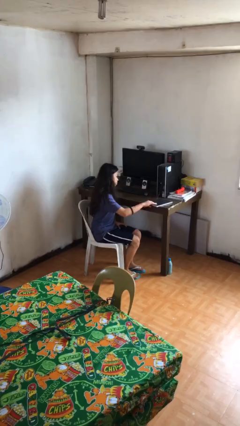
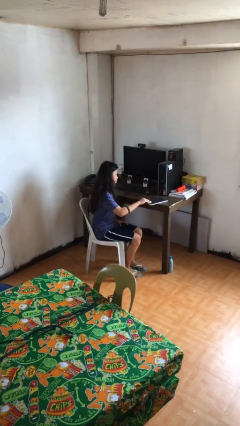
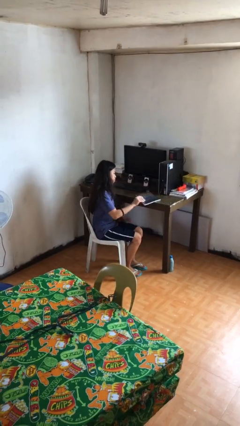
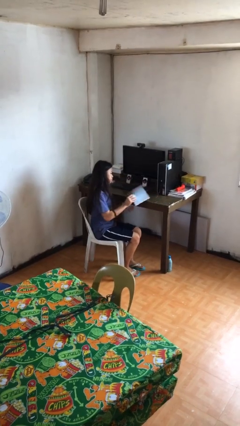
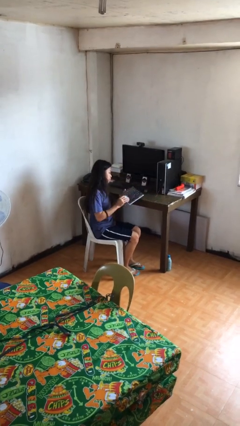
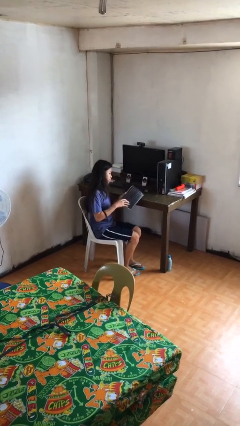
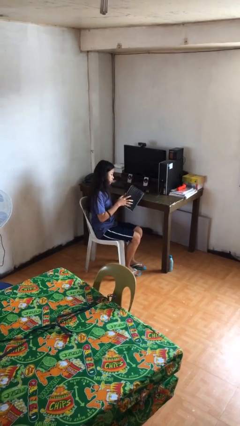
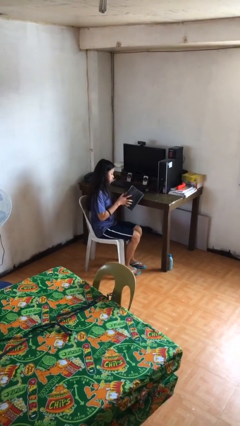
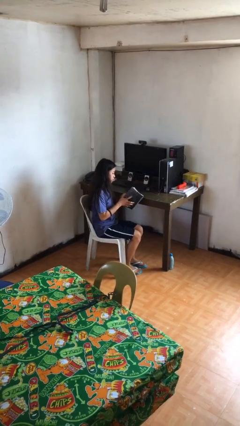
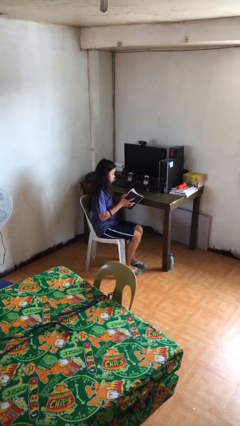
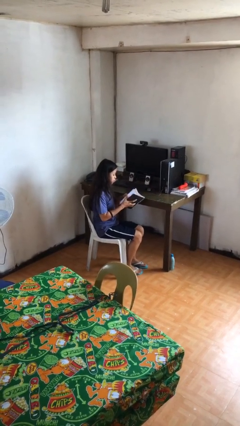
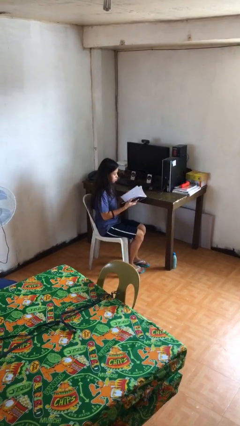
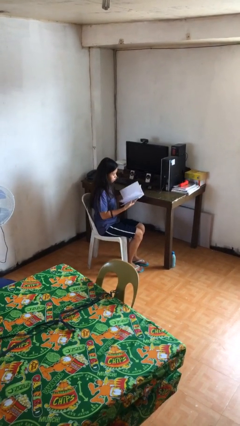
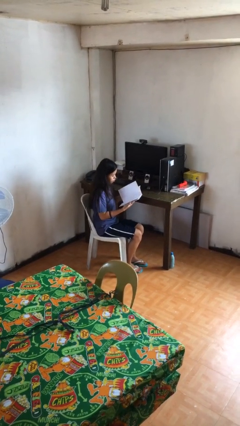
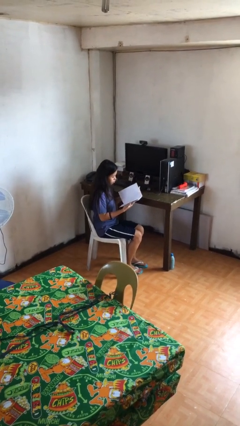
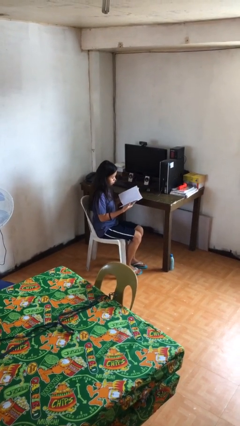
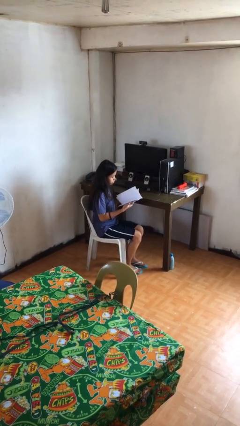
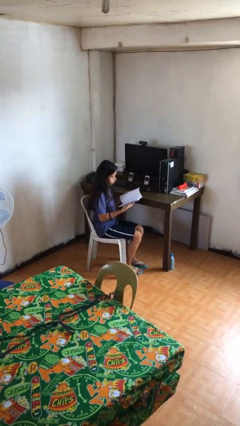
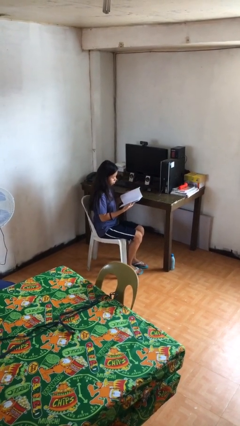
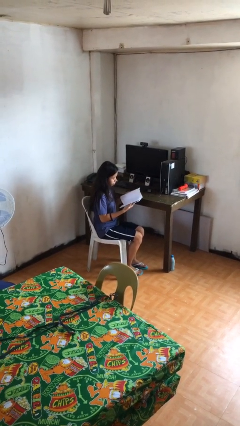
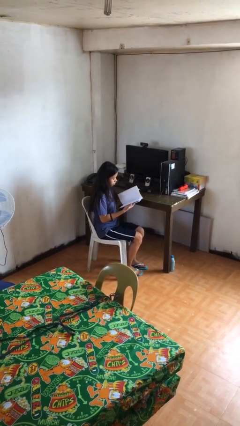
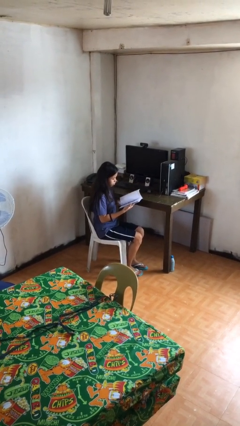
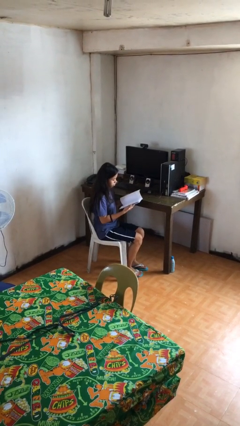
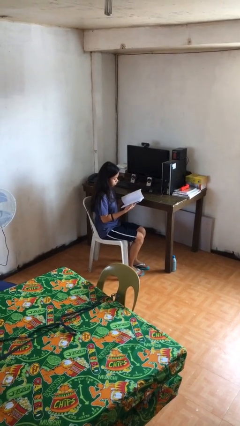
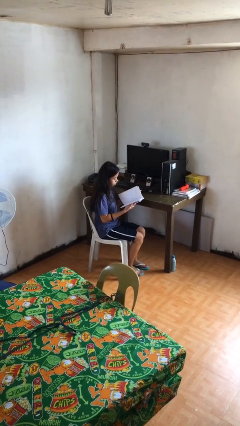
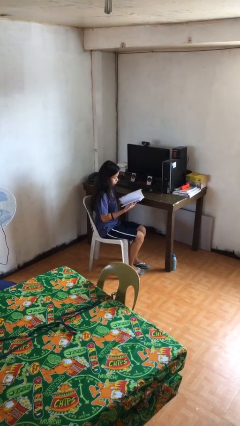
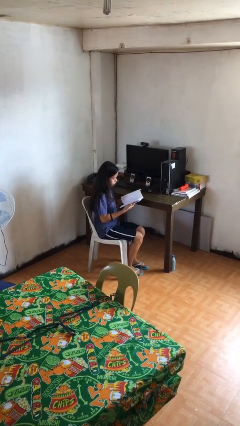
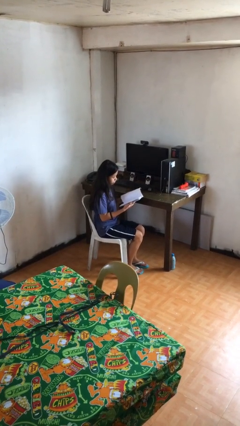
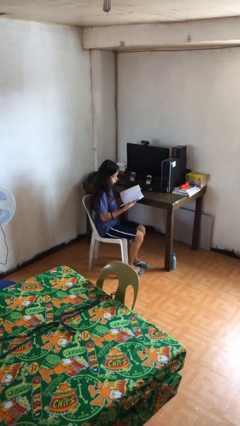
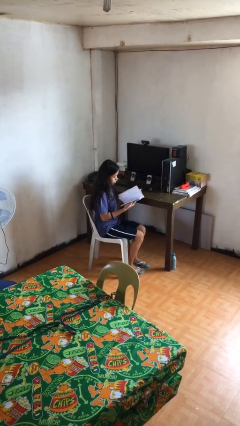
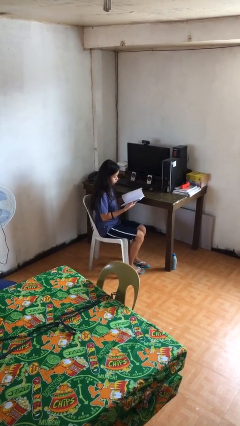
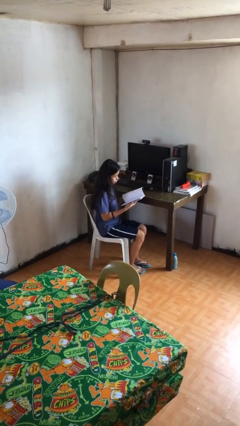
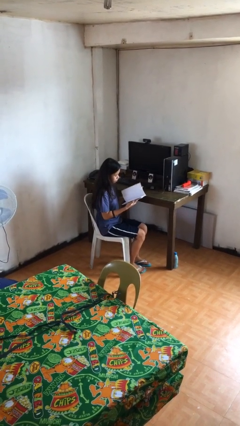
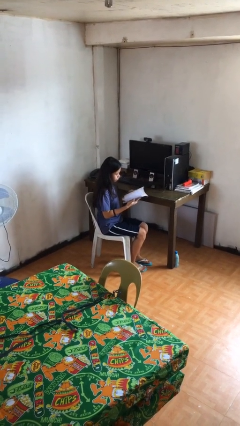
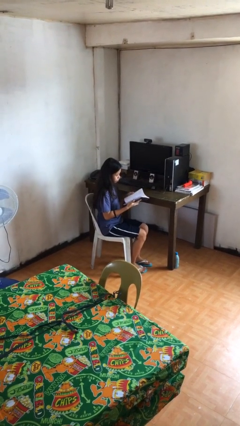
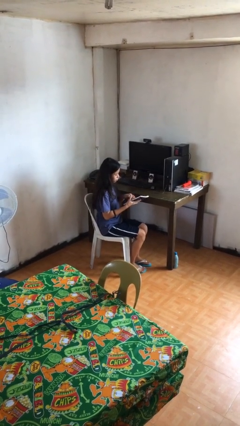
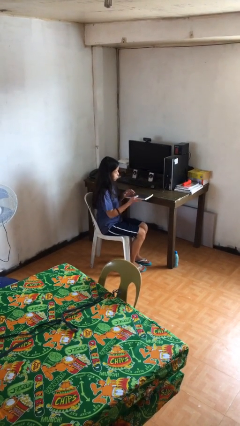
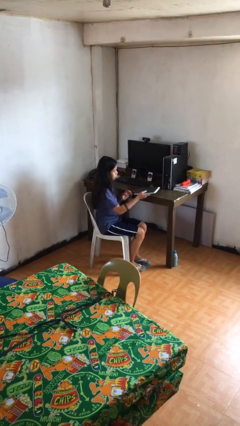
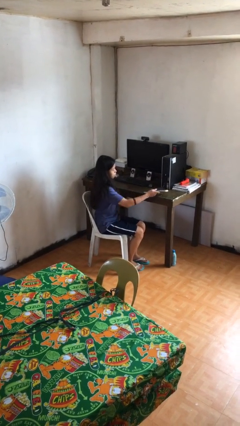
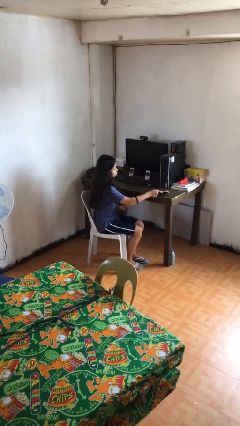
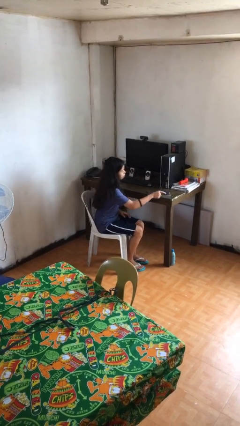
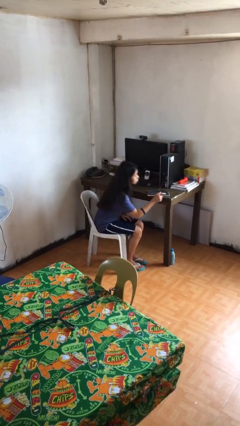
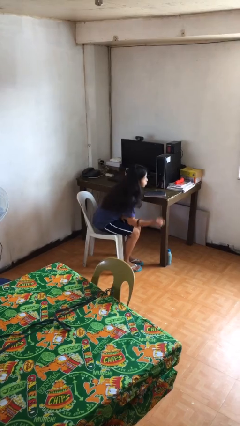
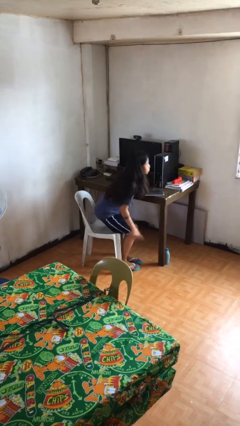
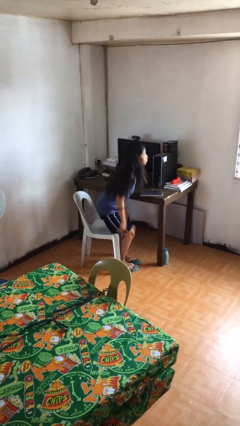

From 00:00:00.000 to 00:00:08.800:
person reads document

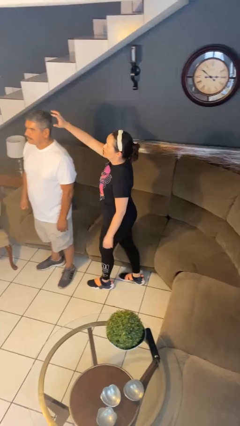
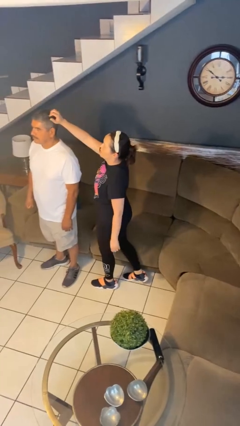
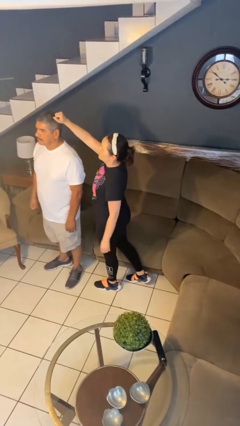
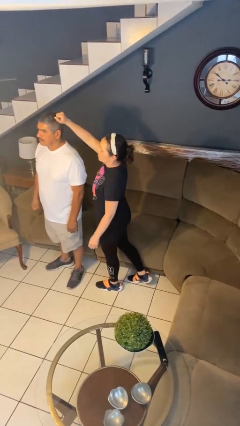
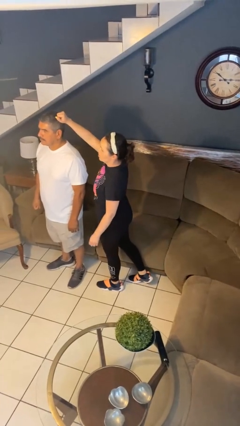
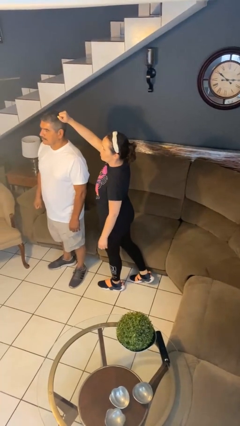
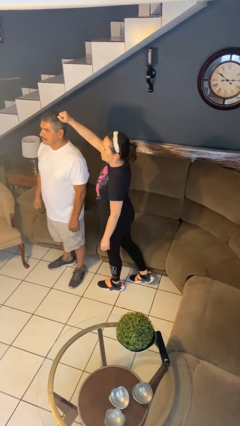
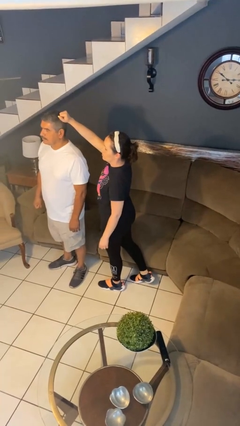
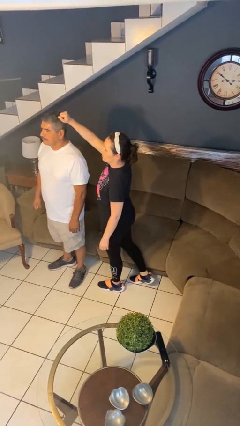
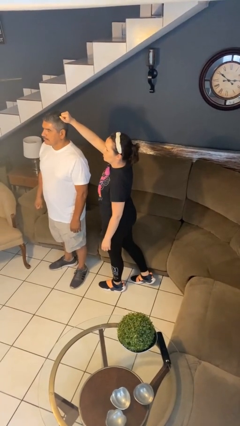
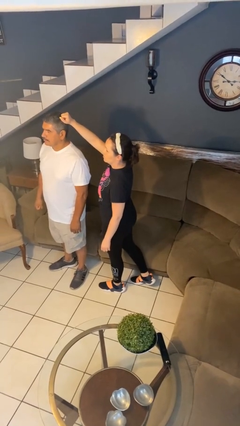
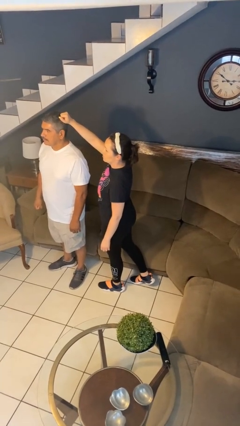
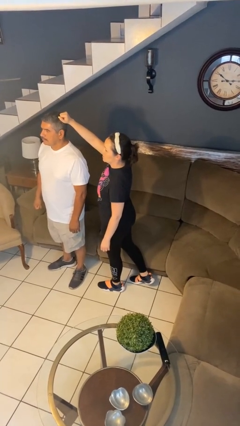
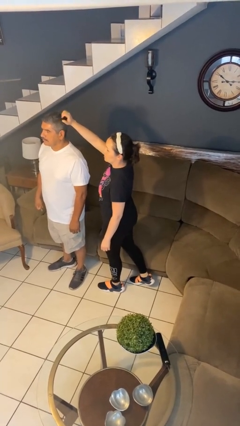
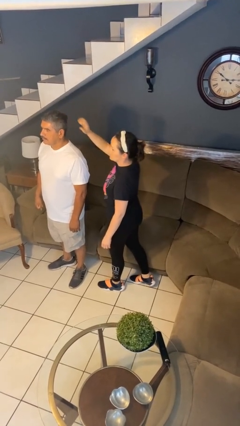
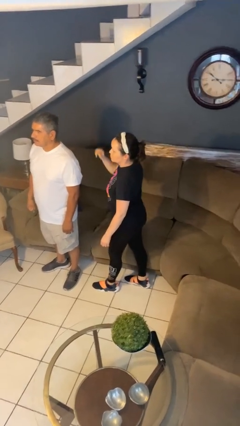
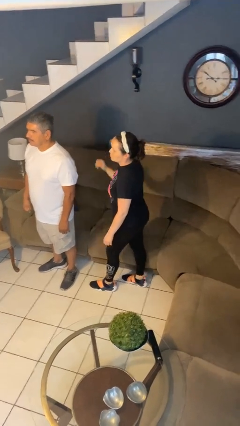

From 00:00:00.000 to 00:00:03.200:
person grabs person by hair

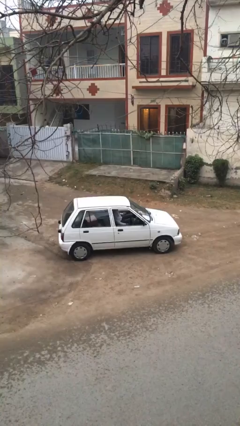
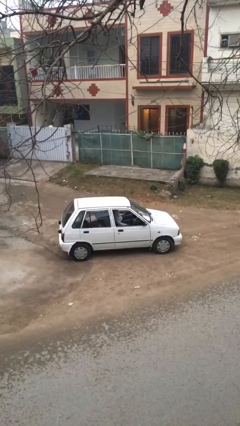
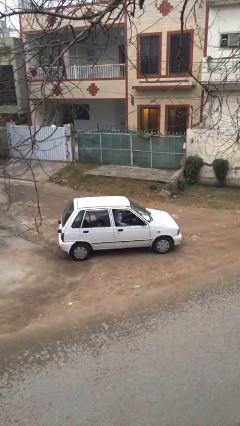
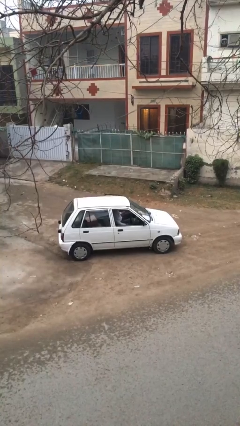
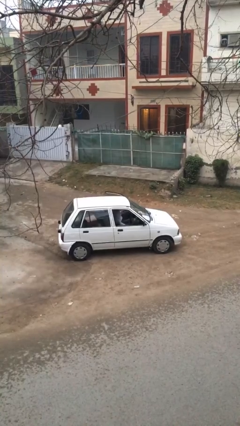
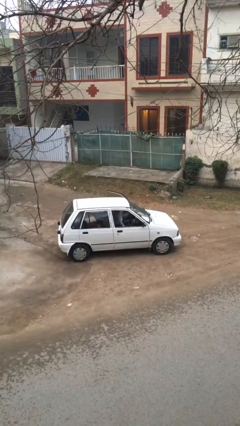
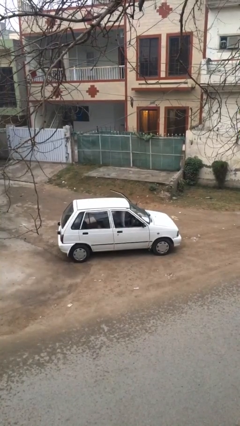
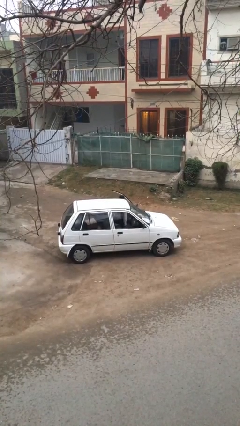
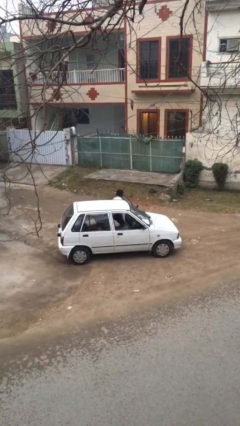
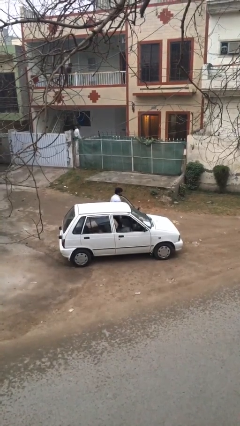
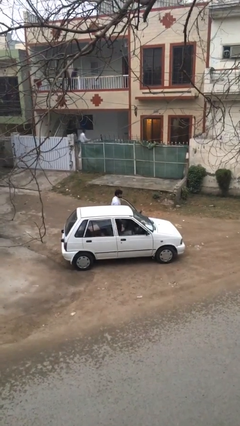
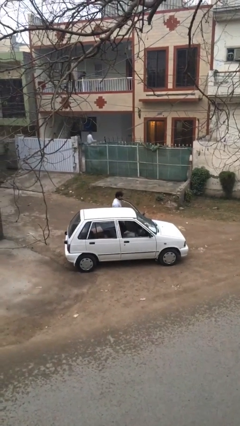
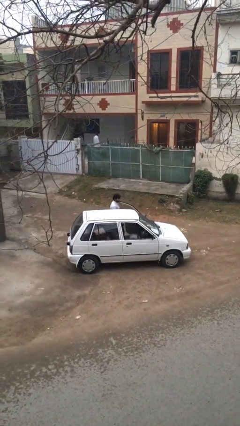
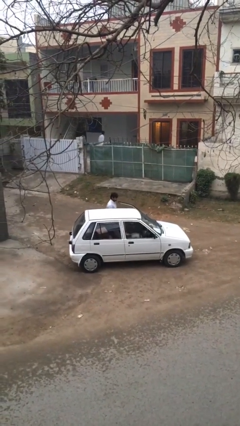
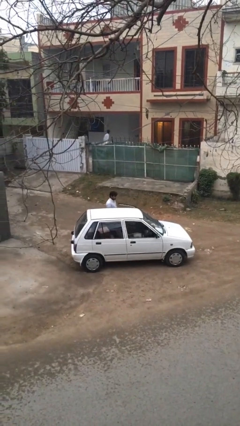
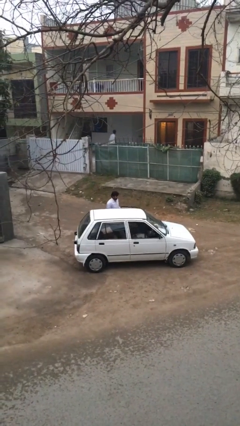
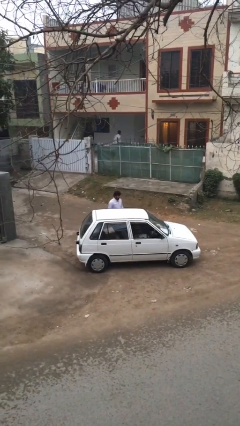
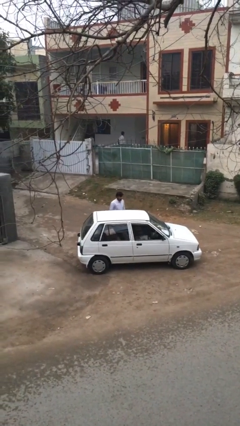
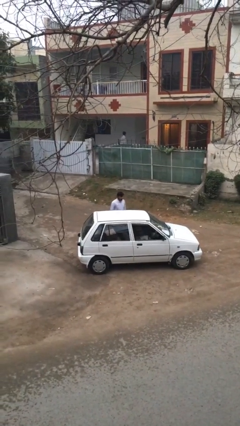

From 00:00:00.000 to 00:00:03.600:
person exits car

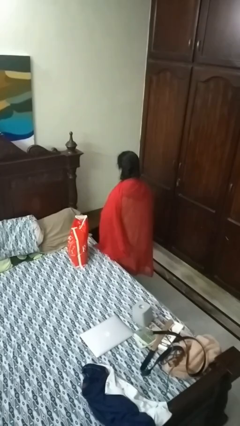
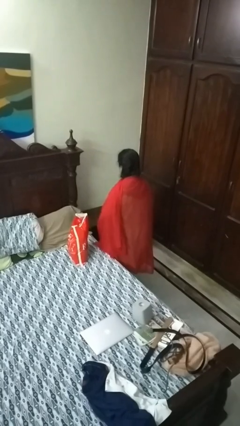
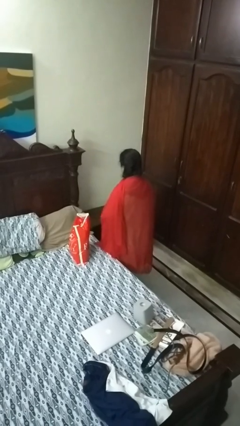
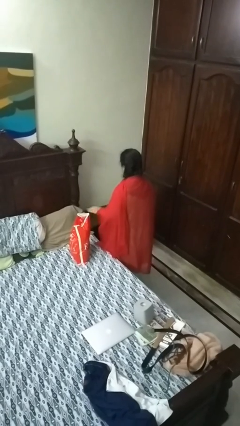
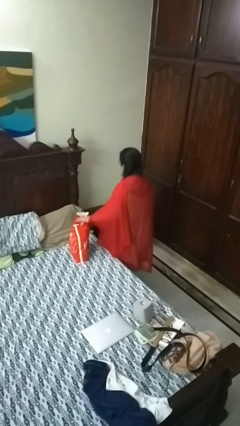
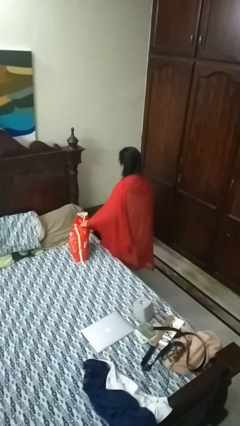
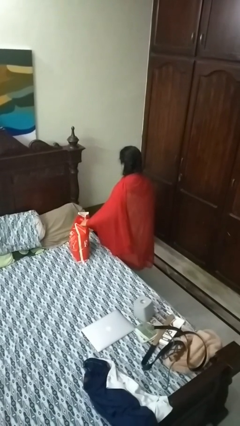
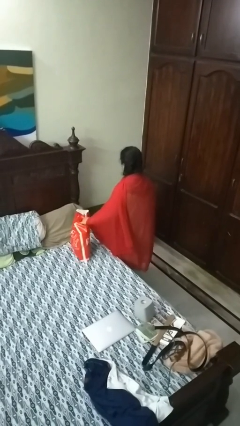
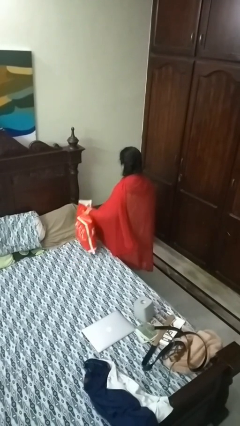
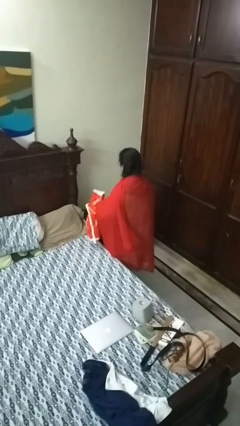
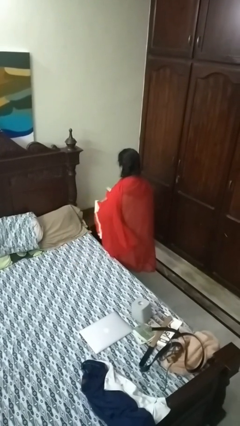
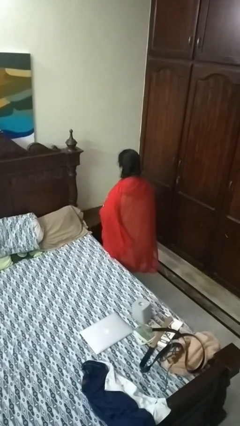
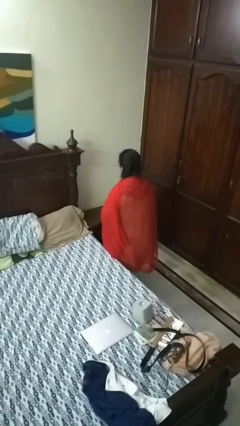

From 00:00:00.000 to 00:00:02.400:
person picks up object from bed
